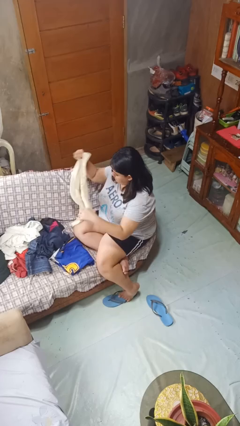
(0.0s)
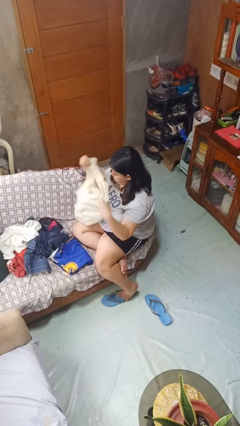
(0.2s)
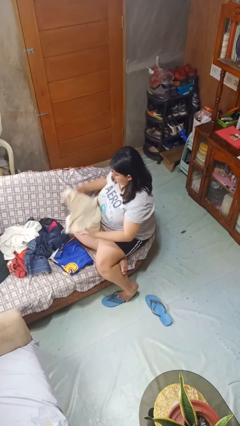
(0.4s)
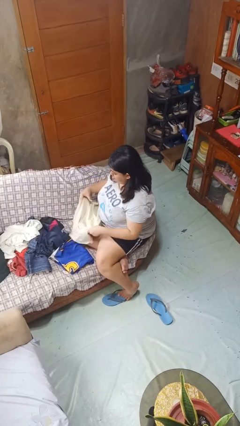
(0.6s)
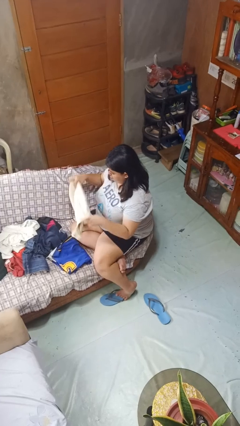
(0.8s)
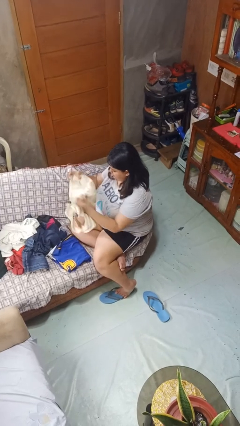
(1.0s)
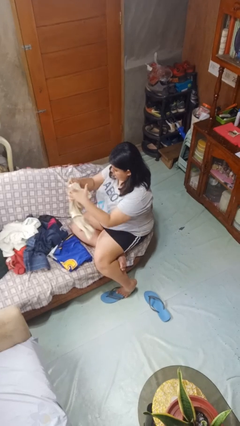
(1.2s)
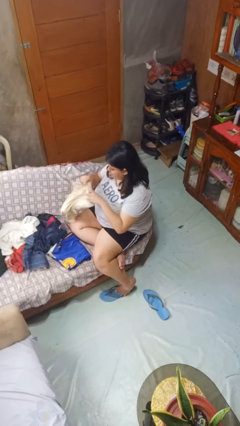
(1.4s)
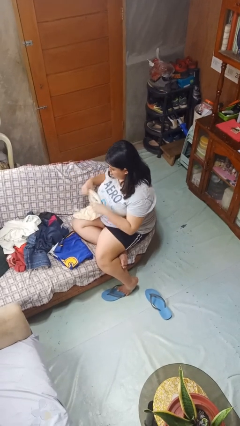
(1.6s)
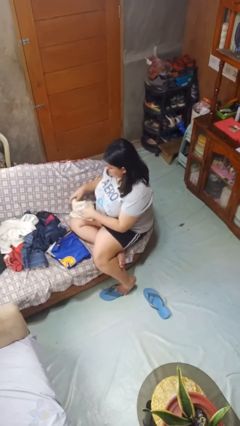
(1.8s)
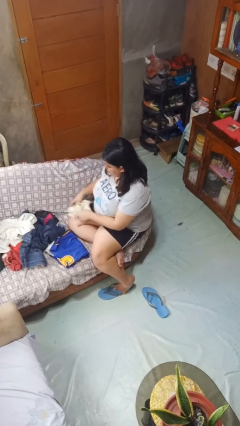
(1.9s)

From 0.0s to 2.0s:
person folds shirt

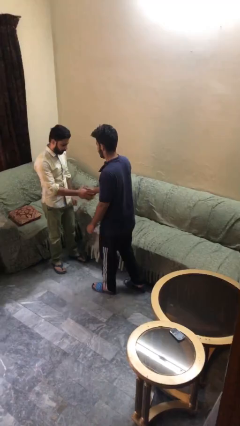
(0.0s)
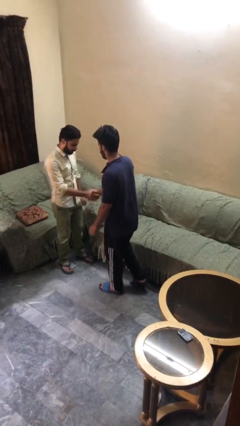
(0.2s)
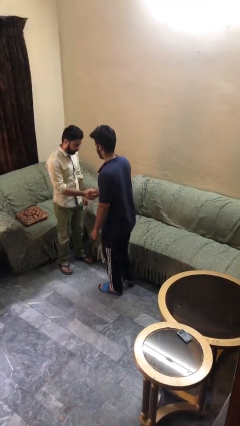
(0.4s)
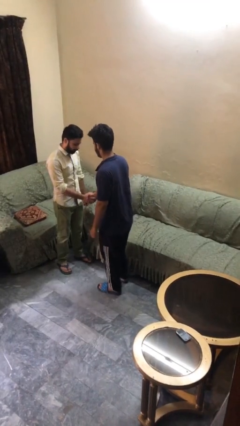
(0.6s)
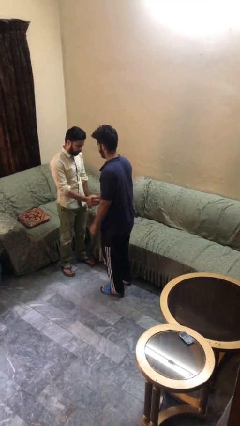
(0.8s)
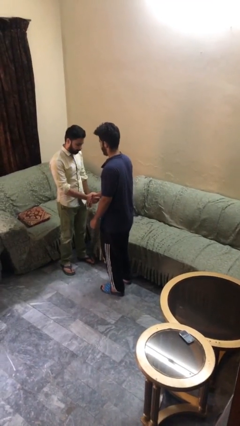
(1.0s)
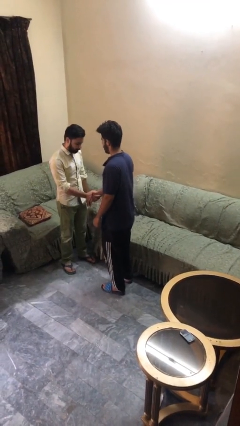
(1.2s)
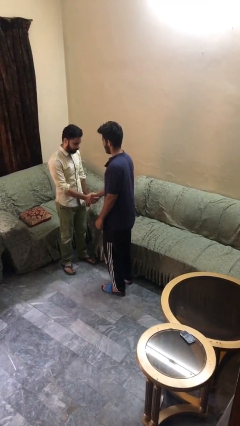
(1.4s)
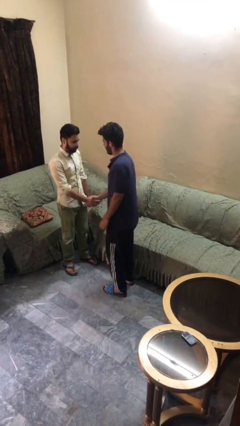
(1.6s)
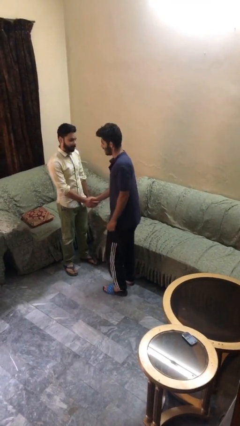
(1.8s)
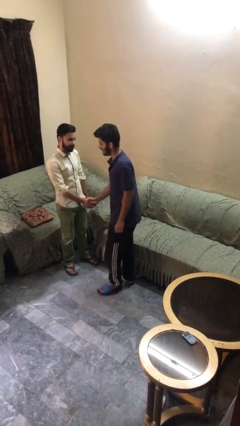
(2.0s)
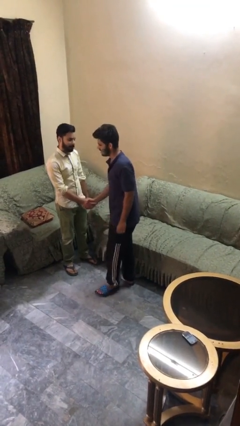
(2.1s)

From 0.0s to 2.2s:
person shakes hand

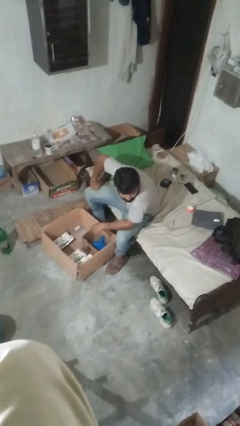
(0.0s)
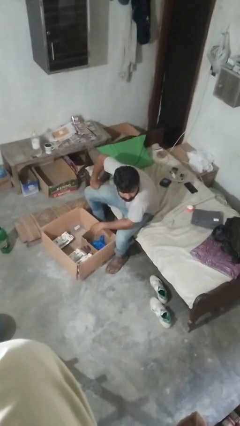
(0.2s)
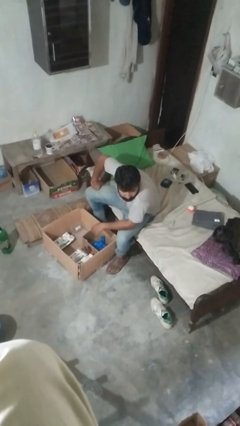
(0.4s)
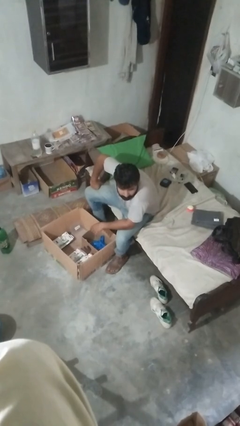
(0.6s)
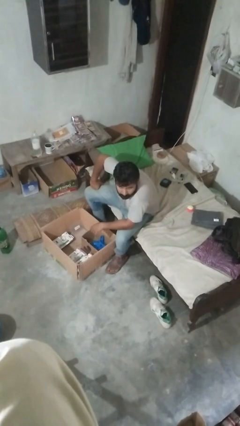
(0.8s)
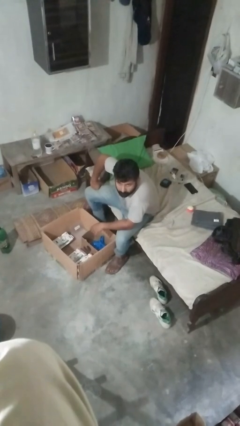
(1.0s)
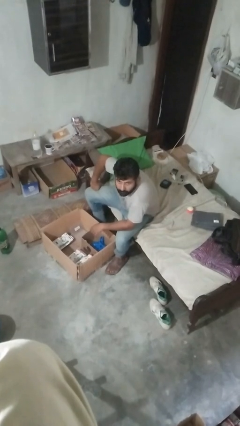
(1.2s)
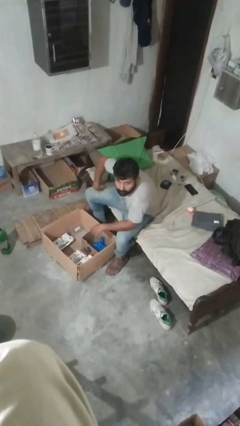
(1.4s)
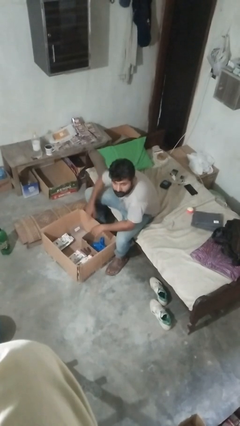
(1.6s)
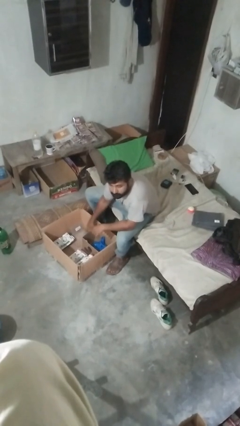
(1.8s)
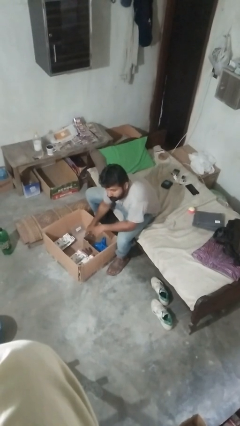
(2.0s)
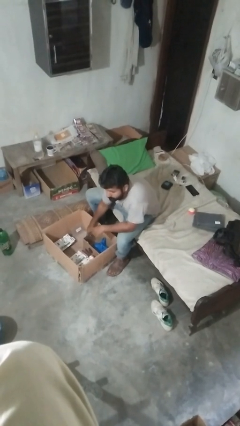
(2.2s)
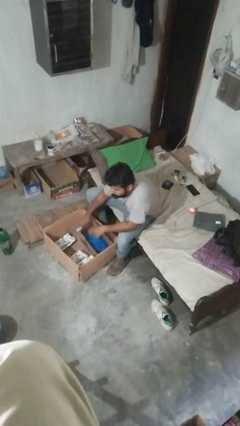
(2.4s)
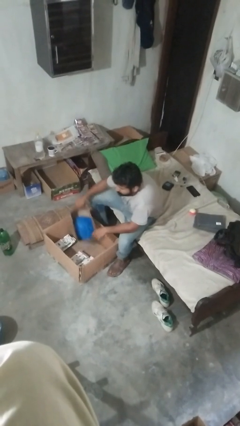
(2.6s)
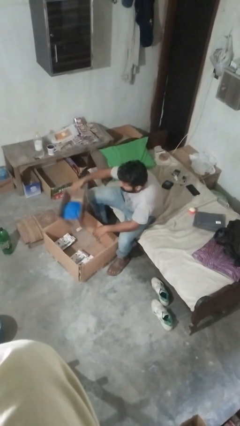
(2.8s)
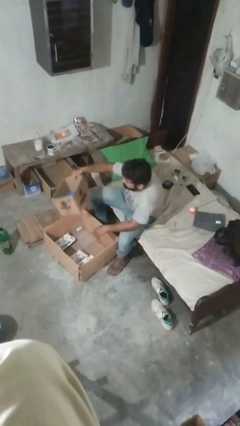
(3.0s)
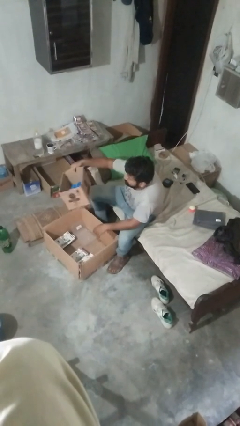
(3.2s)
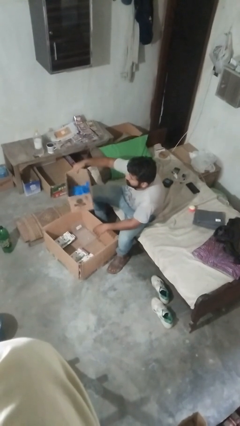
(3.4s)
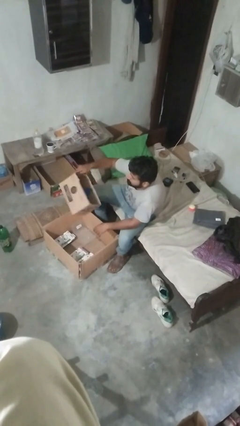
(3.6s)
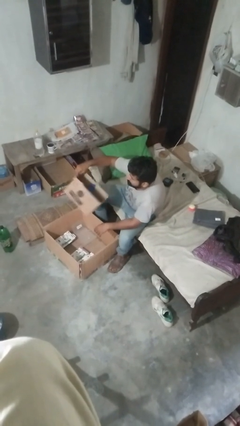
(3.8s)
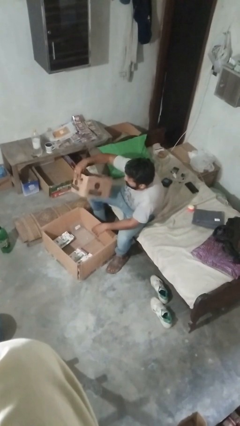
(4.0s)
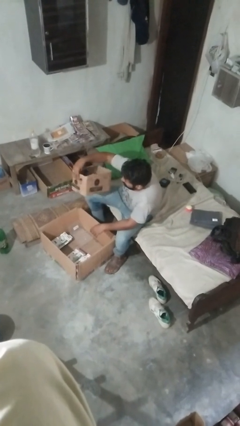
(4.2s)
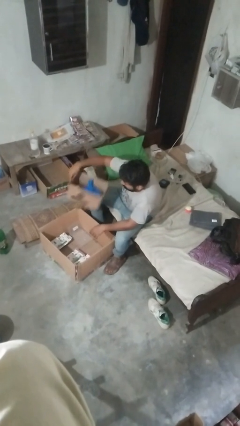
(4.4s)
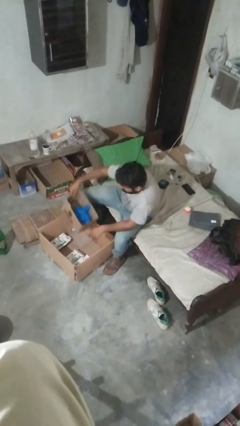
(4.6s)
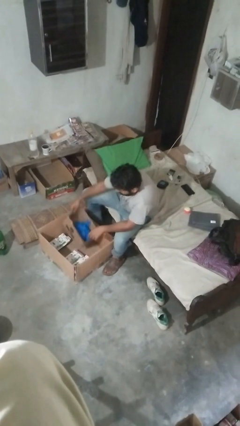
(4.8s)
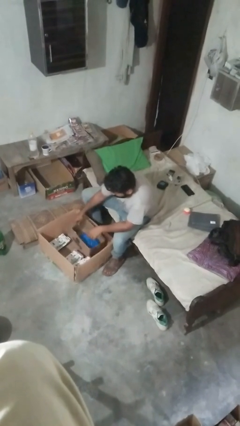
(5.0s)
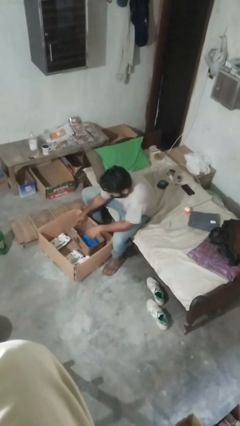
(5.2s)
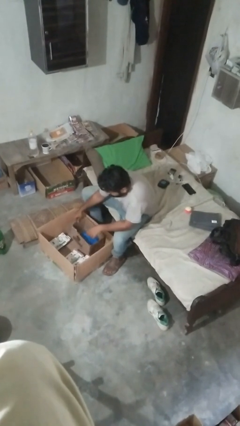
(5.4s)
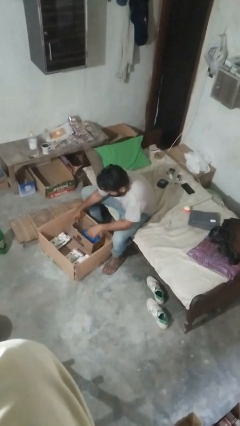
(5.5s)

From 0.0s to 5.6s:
person searches in box

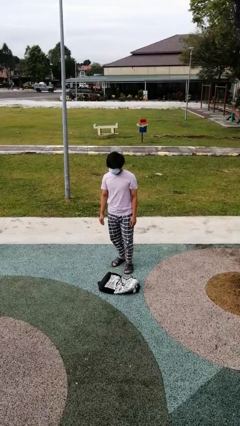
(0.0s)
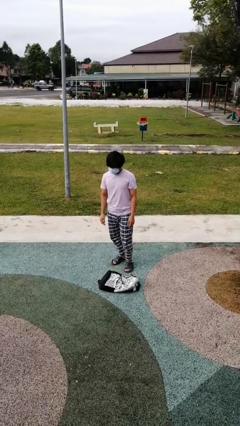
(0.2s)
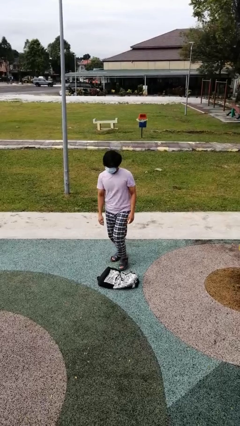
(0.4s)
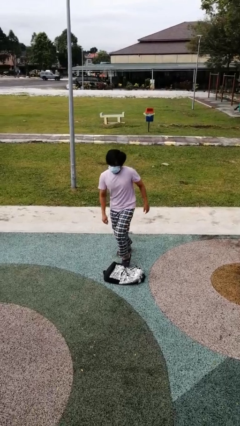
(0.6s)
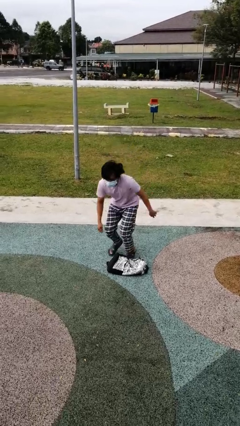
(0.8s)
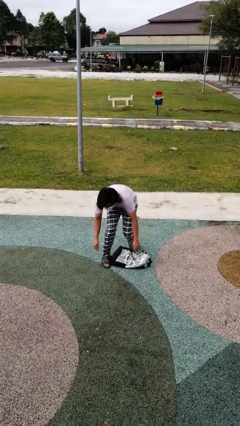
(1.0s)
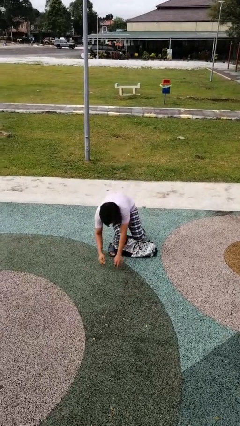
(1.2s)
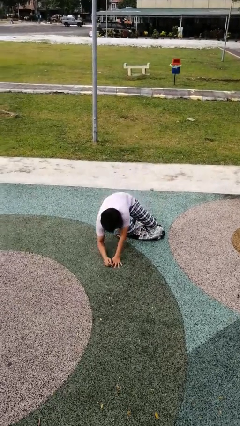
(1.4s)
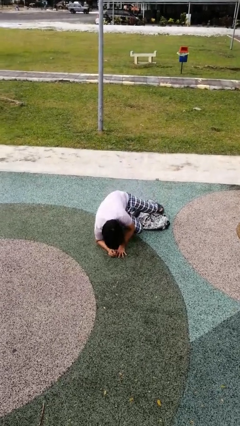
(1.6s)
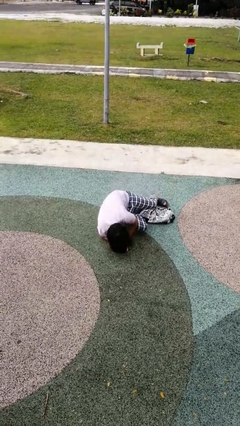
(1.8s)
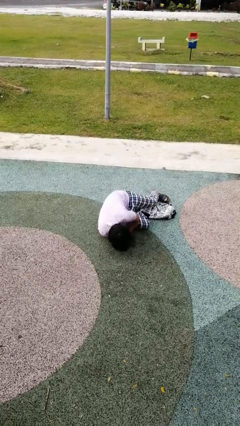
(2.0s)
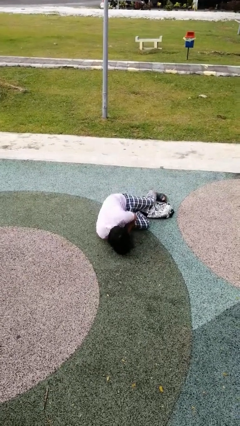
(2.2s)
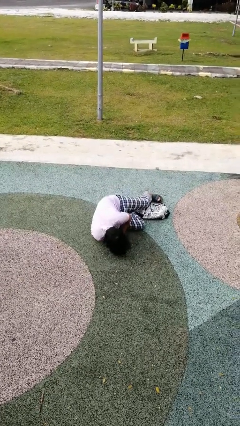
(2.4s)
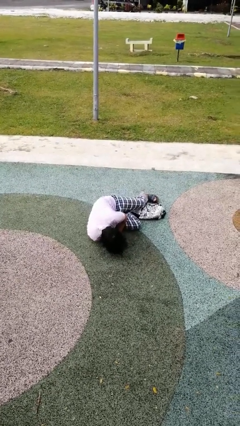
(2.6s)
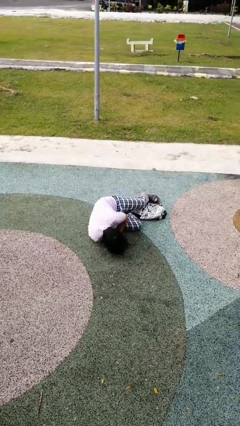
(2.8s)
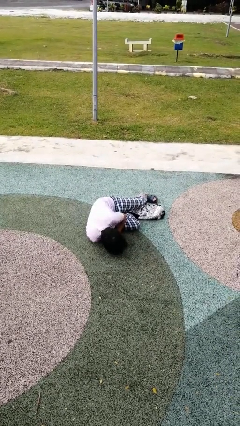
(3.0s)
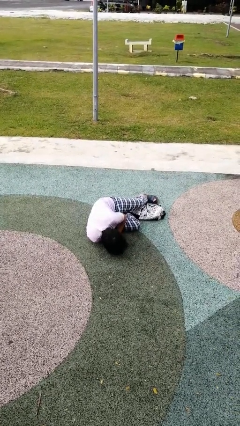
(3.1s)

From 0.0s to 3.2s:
person trips on object on floor

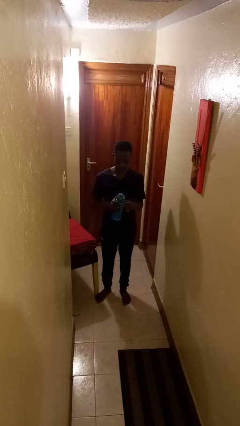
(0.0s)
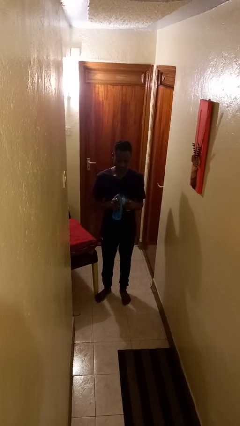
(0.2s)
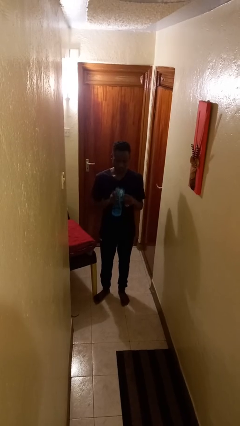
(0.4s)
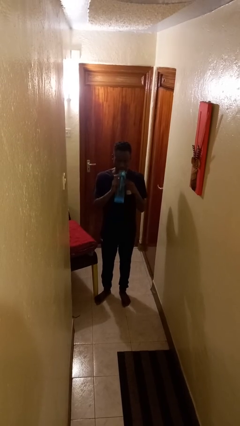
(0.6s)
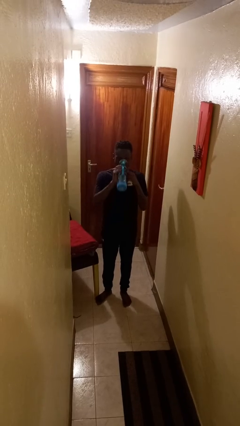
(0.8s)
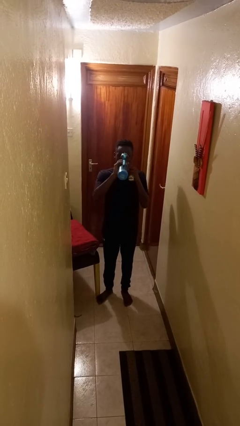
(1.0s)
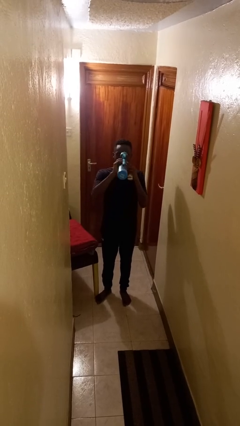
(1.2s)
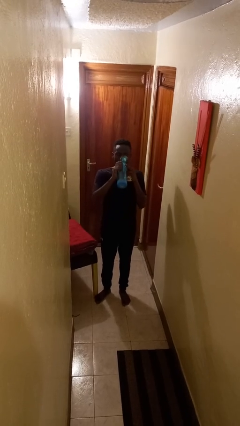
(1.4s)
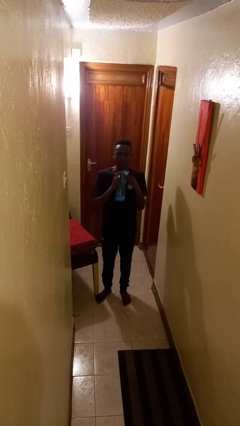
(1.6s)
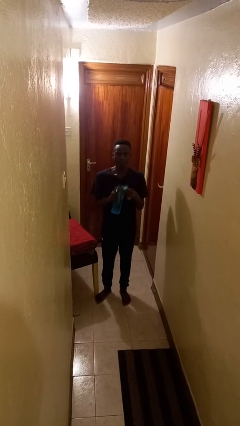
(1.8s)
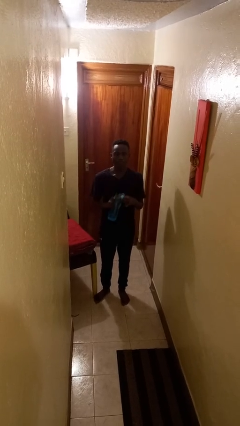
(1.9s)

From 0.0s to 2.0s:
person drinks from cup

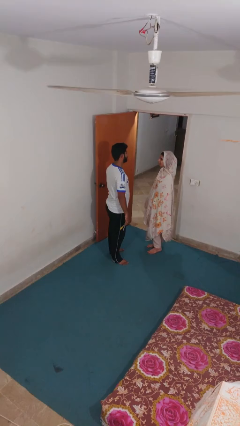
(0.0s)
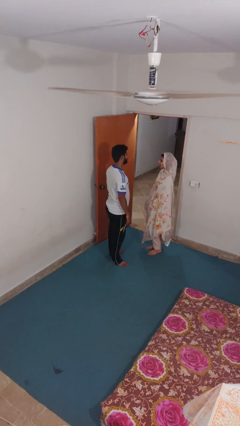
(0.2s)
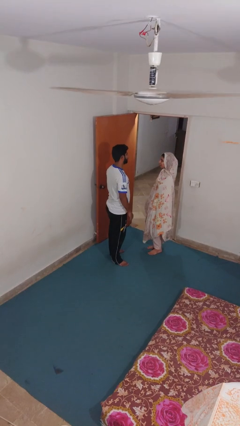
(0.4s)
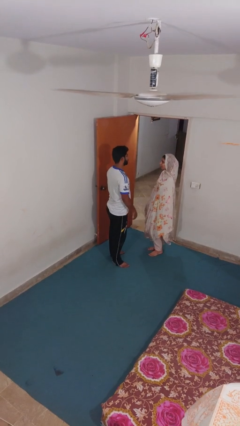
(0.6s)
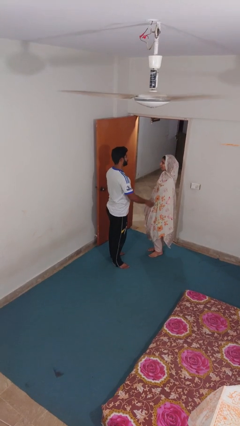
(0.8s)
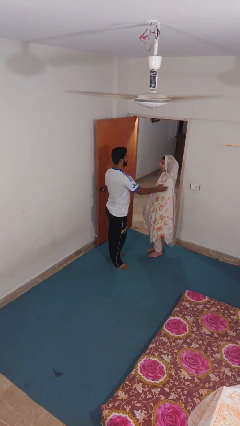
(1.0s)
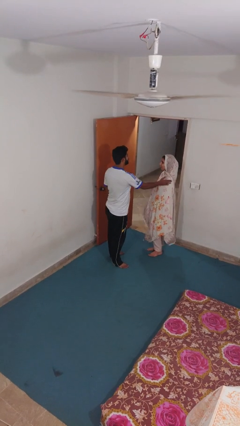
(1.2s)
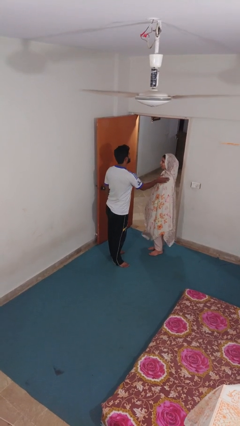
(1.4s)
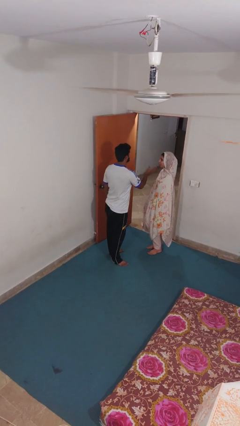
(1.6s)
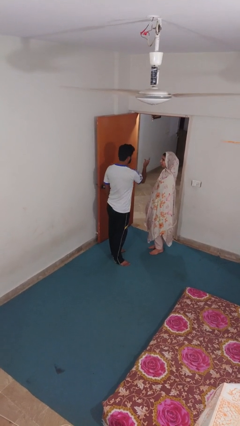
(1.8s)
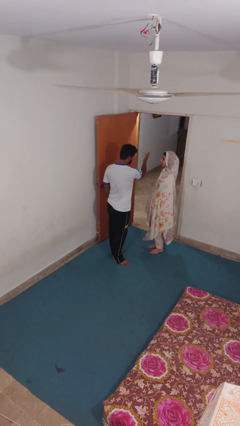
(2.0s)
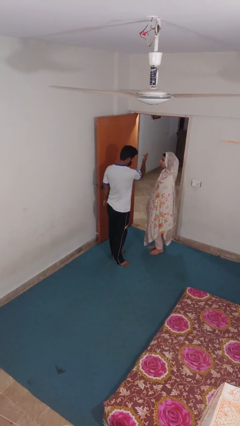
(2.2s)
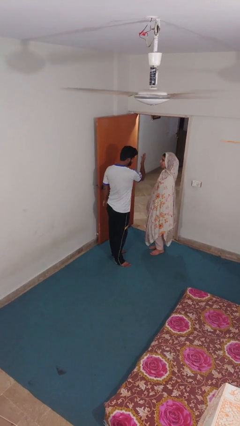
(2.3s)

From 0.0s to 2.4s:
person shoves person

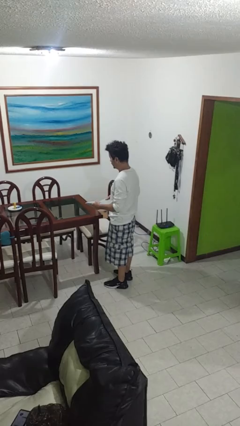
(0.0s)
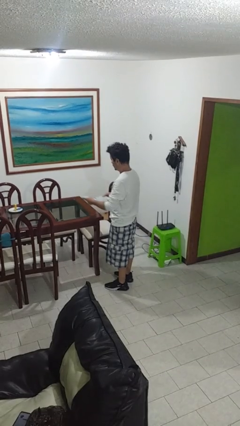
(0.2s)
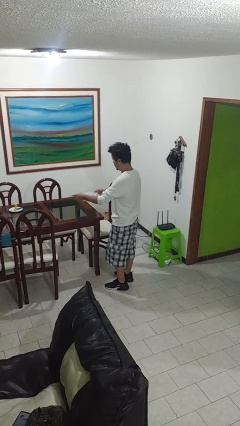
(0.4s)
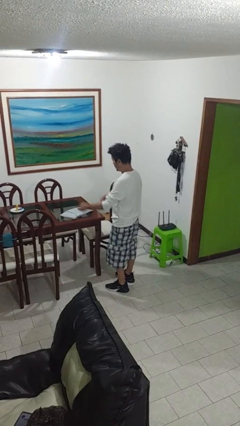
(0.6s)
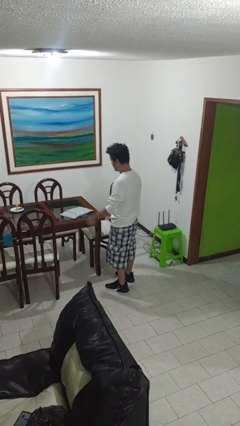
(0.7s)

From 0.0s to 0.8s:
person throws object on table
